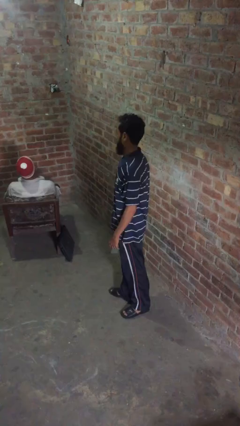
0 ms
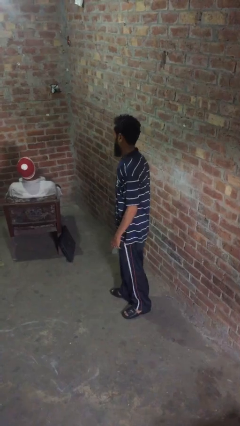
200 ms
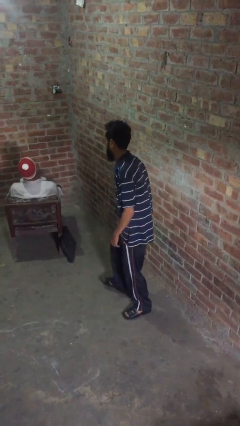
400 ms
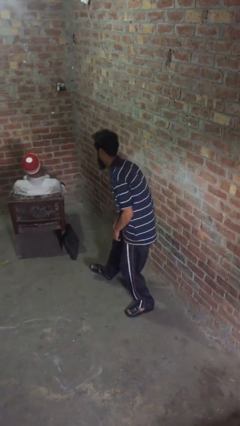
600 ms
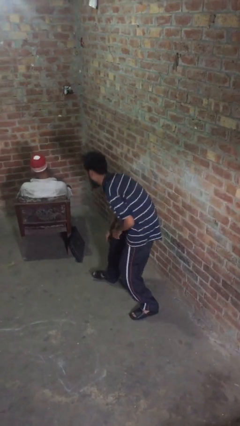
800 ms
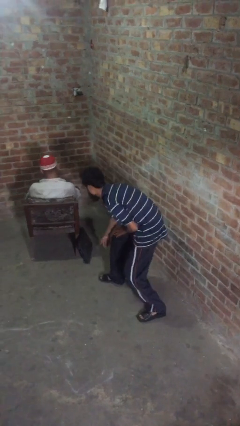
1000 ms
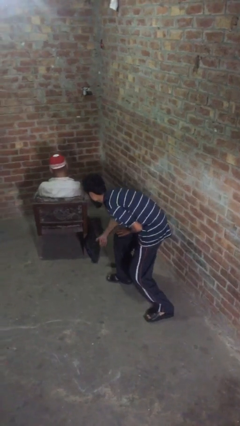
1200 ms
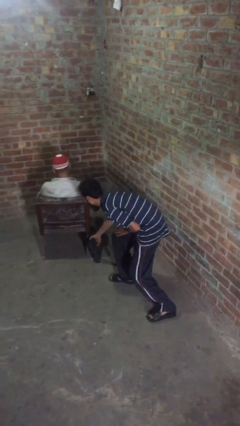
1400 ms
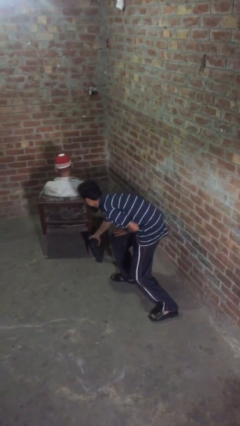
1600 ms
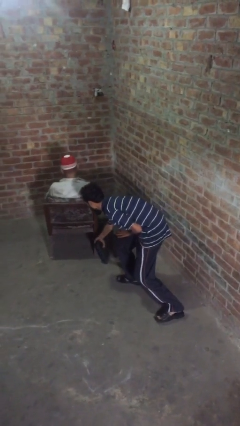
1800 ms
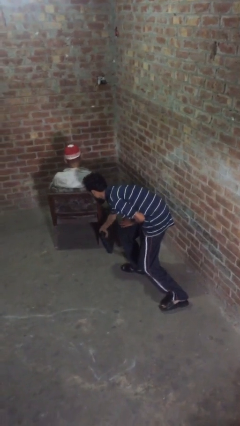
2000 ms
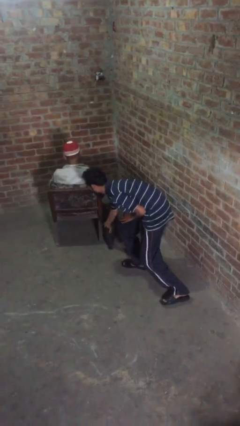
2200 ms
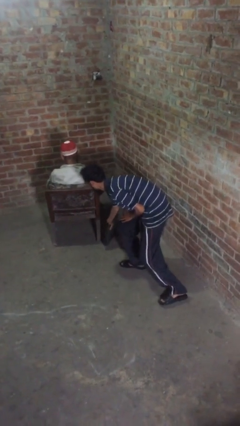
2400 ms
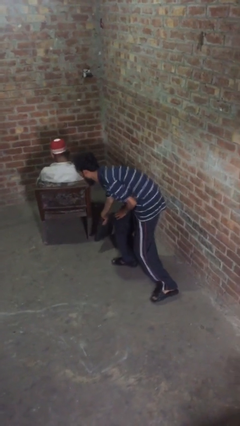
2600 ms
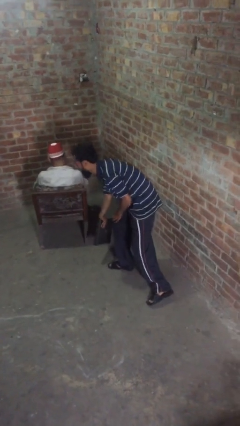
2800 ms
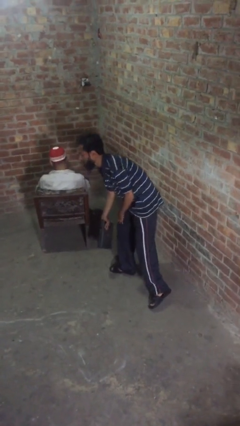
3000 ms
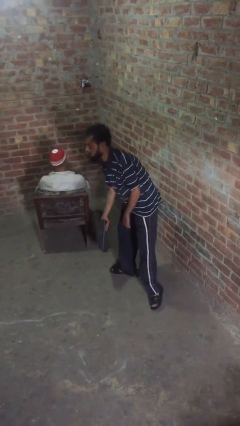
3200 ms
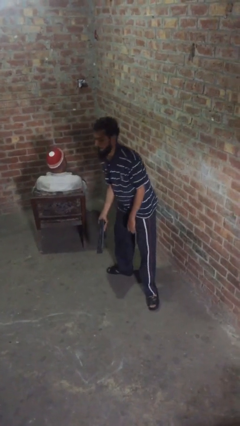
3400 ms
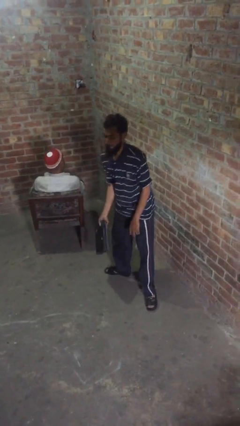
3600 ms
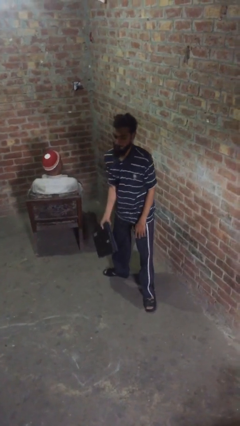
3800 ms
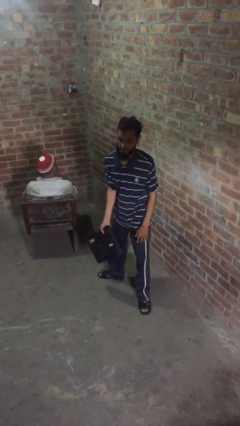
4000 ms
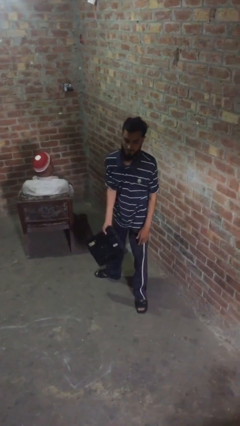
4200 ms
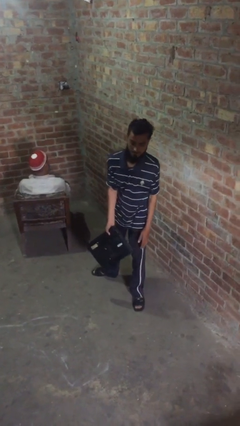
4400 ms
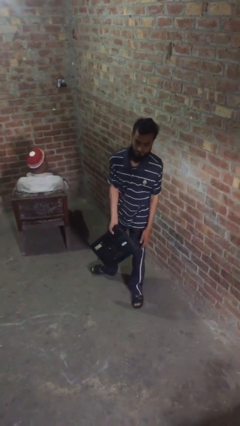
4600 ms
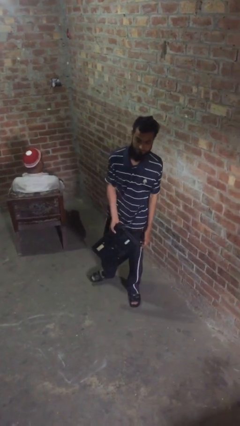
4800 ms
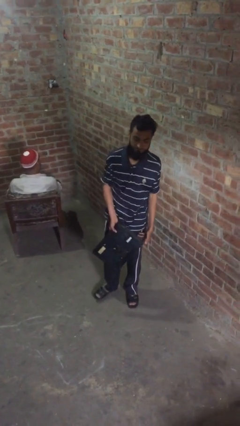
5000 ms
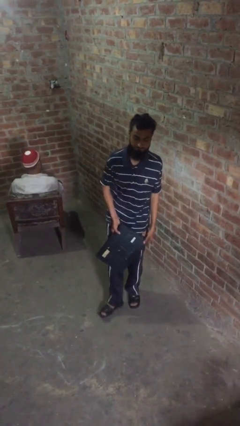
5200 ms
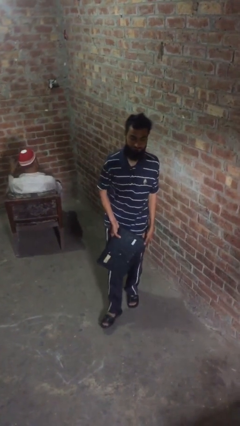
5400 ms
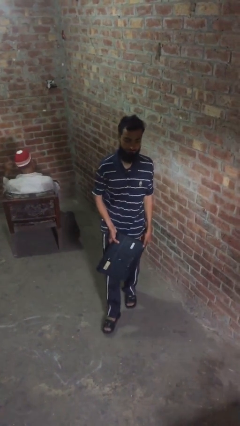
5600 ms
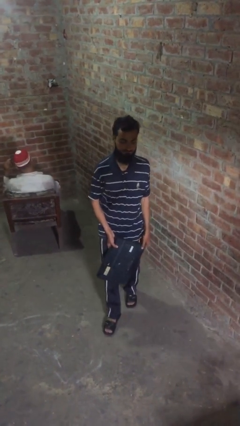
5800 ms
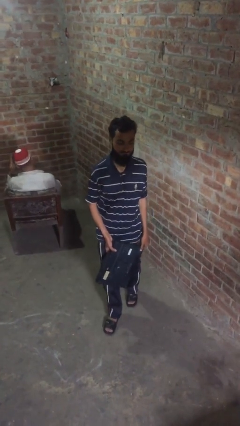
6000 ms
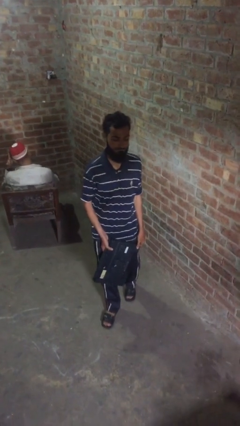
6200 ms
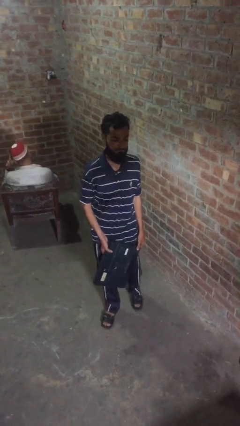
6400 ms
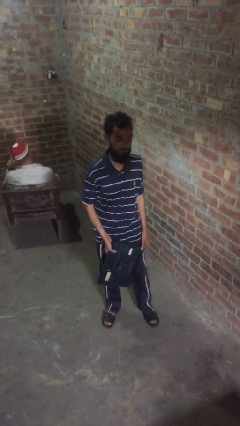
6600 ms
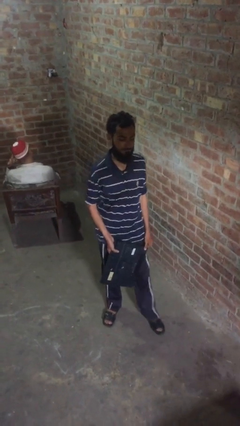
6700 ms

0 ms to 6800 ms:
person steals object from person

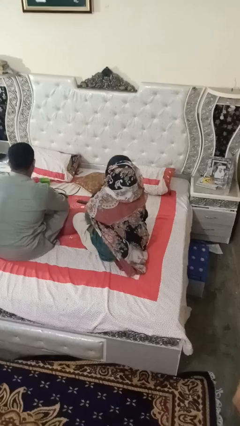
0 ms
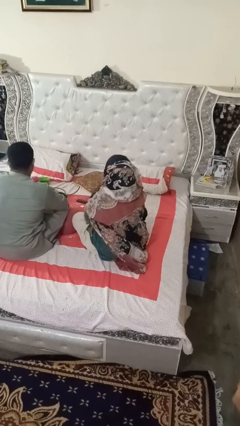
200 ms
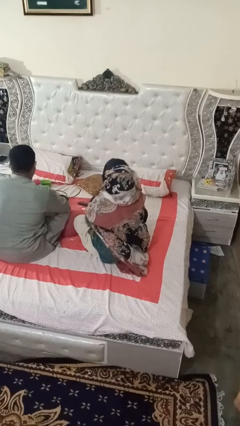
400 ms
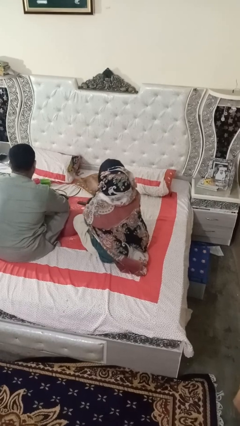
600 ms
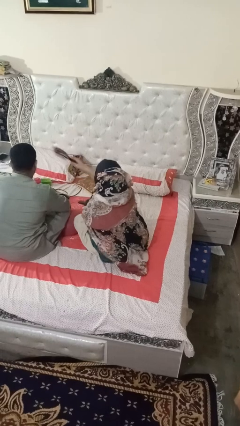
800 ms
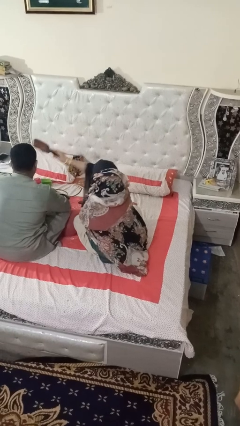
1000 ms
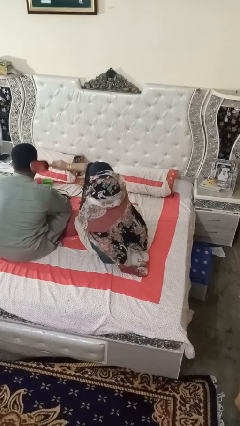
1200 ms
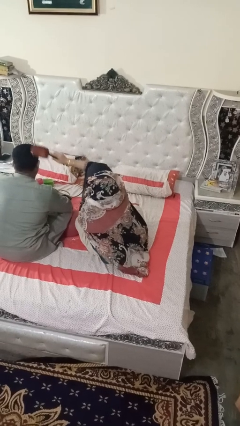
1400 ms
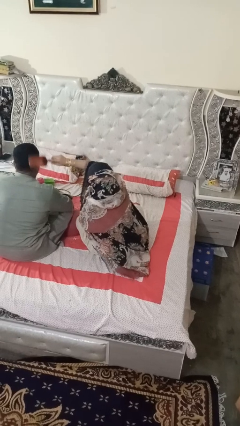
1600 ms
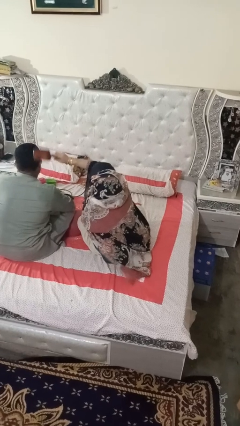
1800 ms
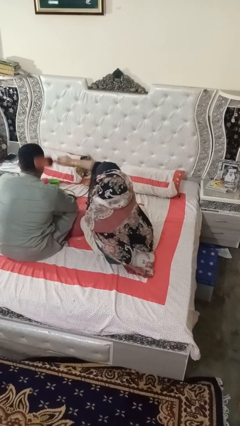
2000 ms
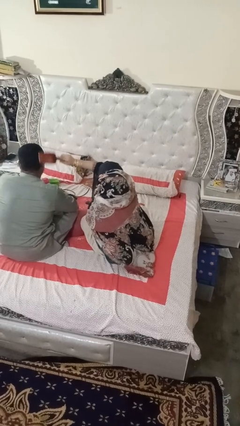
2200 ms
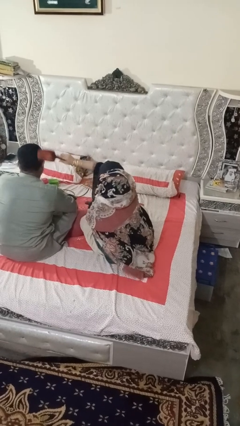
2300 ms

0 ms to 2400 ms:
person brushes hair of person

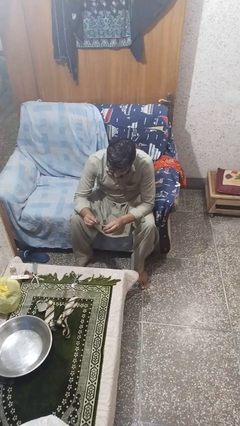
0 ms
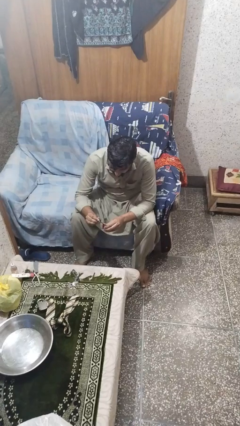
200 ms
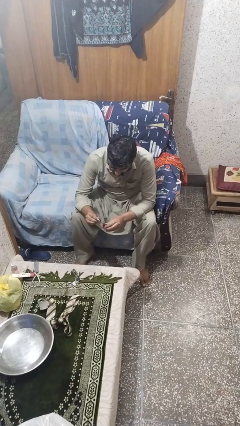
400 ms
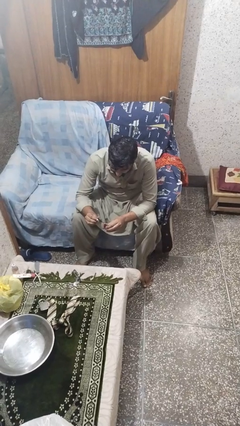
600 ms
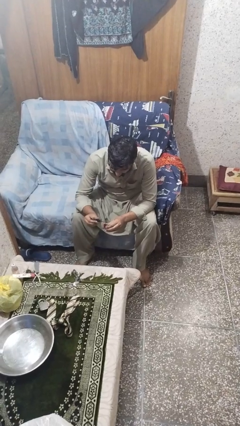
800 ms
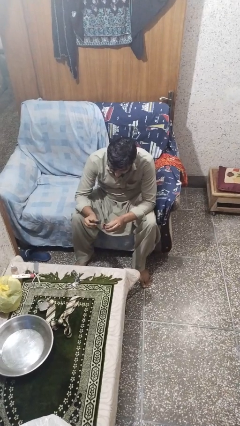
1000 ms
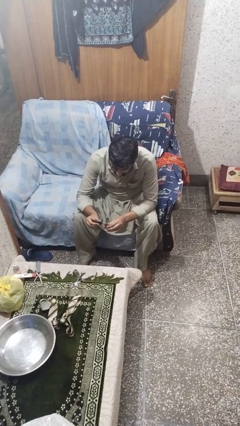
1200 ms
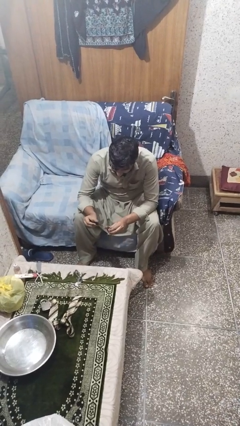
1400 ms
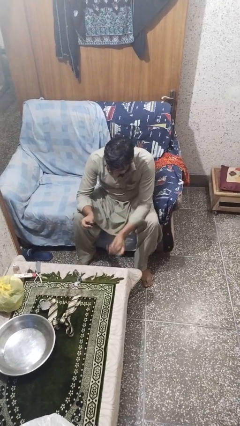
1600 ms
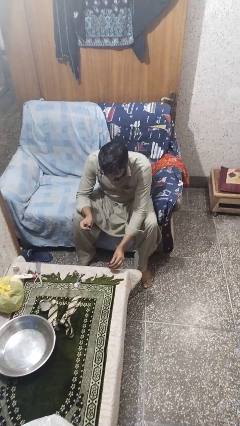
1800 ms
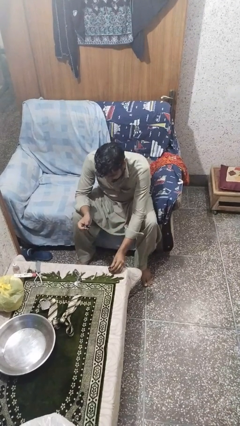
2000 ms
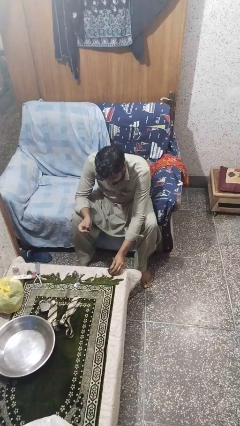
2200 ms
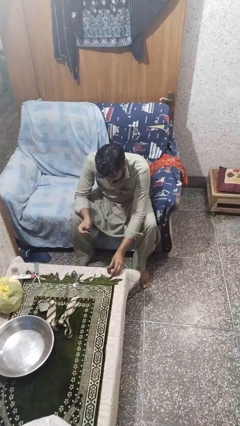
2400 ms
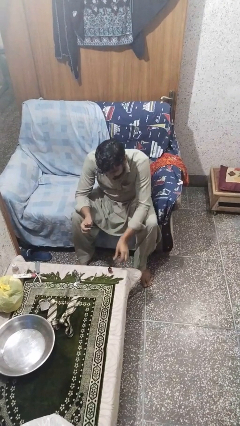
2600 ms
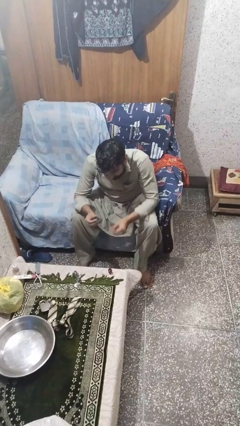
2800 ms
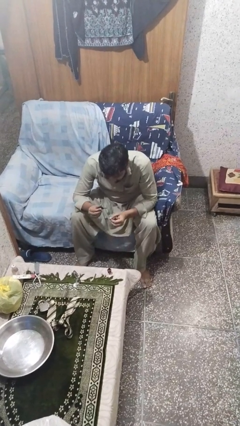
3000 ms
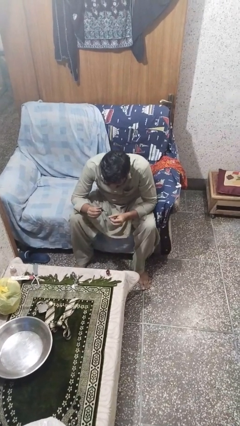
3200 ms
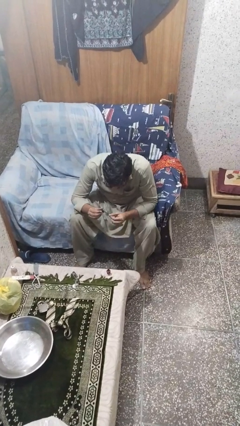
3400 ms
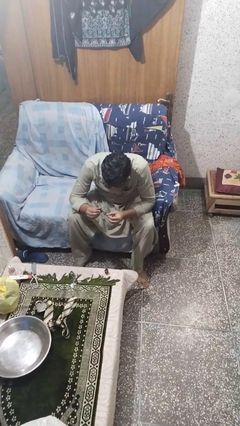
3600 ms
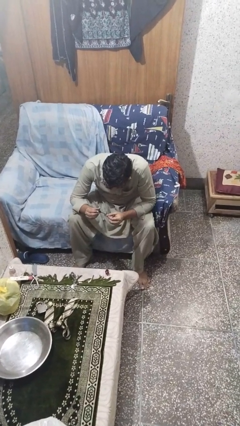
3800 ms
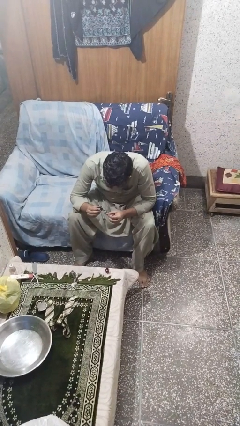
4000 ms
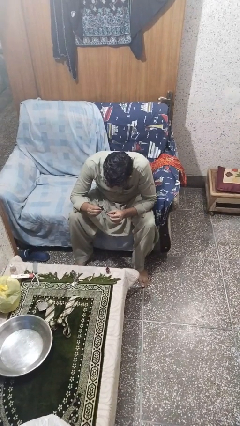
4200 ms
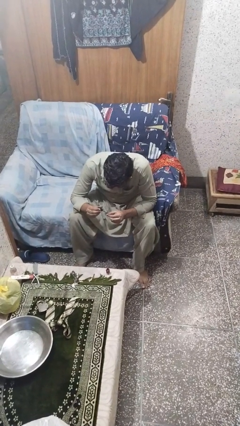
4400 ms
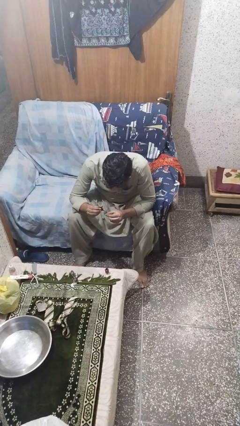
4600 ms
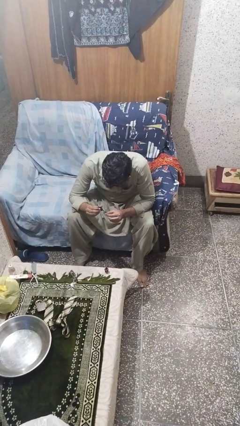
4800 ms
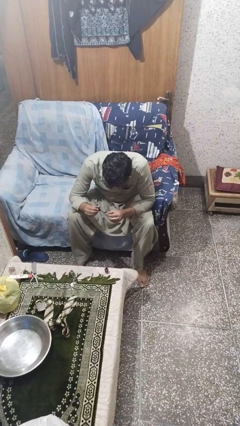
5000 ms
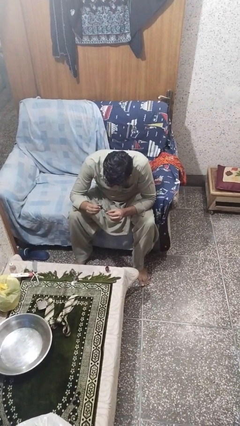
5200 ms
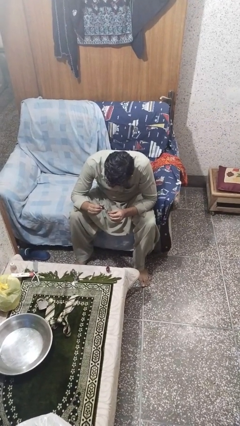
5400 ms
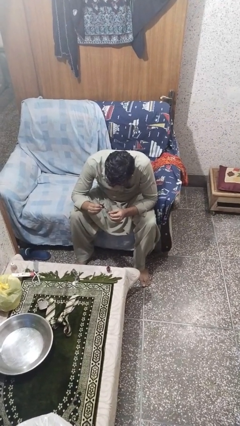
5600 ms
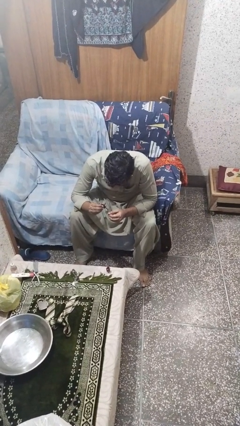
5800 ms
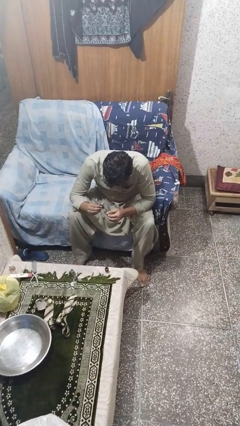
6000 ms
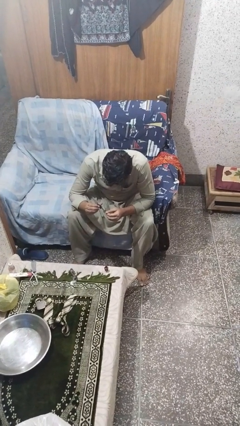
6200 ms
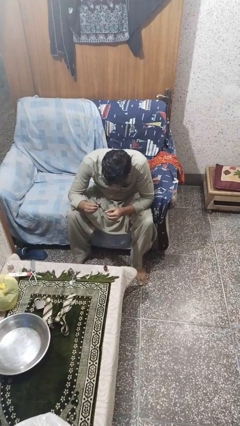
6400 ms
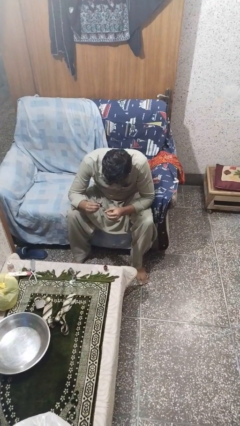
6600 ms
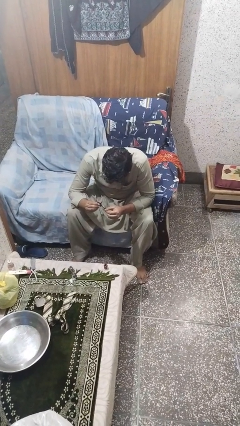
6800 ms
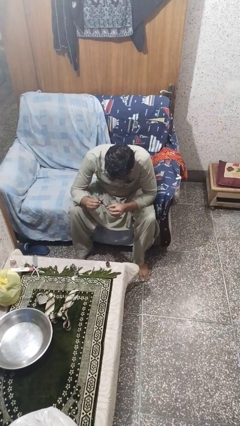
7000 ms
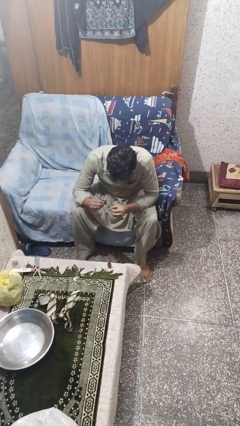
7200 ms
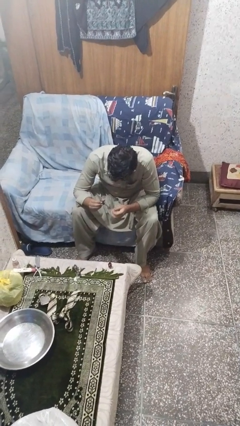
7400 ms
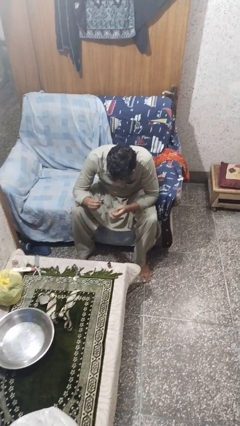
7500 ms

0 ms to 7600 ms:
person paints fingernails

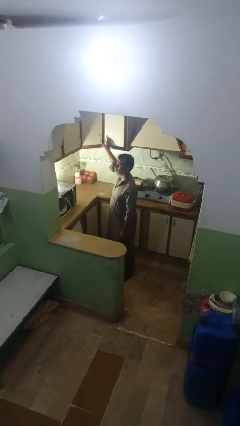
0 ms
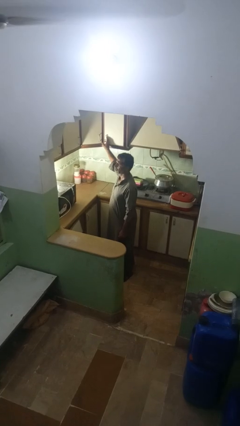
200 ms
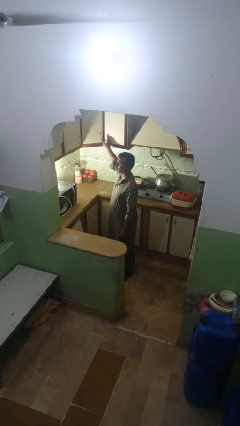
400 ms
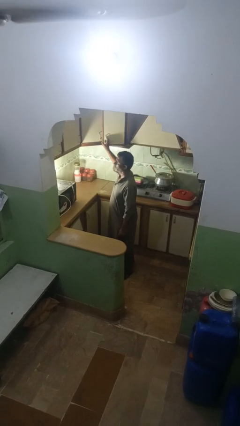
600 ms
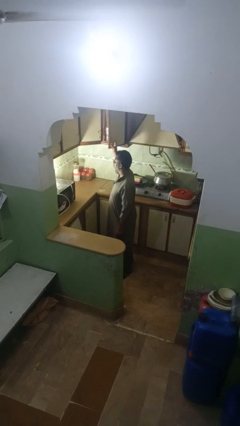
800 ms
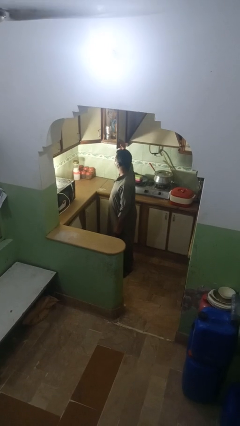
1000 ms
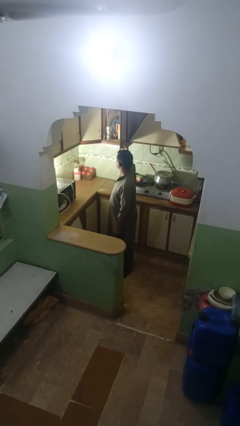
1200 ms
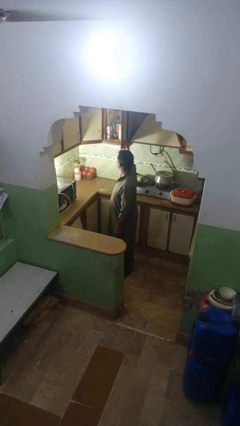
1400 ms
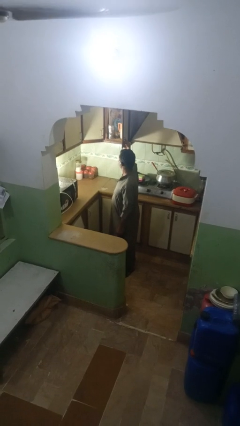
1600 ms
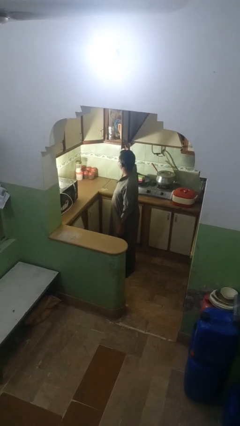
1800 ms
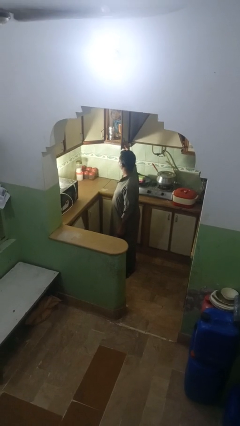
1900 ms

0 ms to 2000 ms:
person opens kitchen drawer
